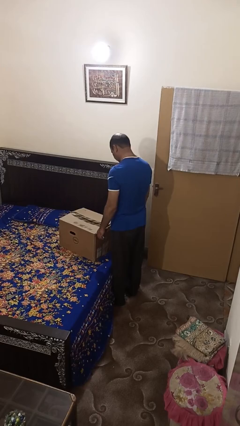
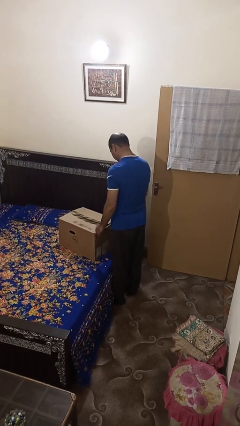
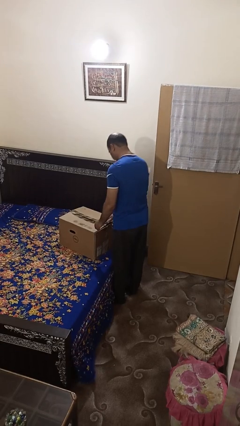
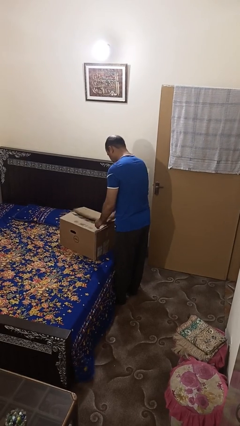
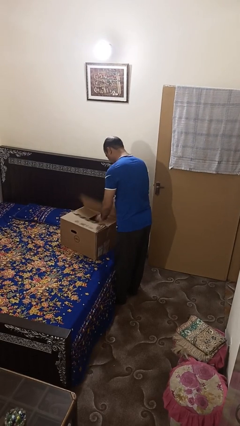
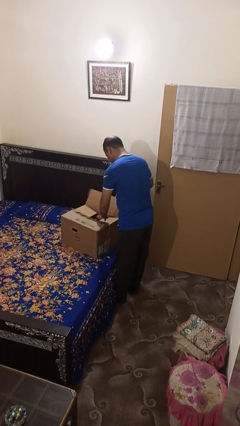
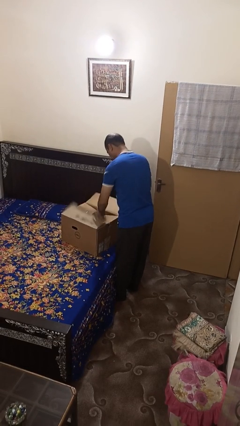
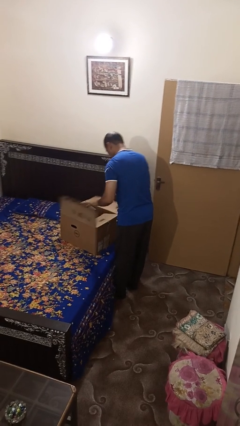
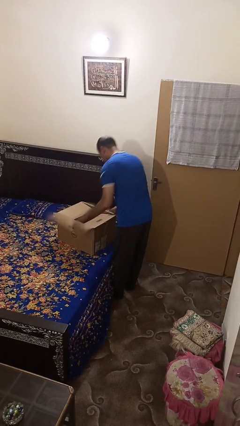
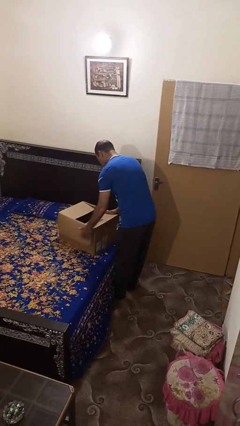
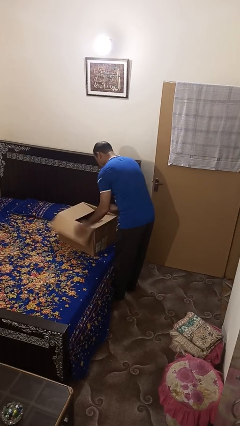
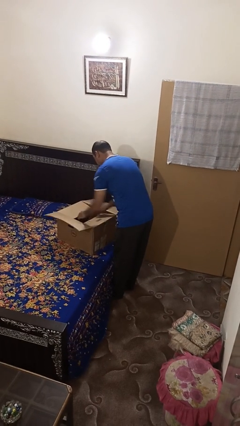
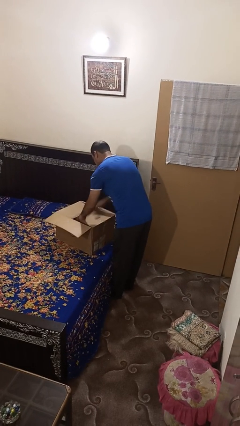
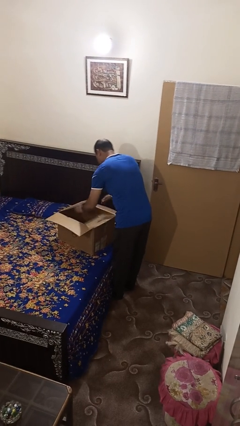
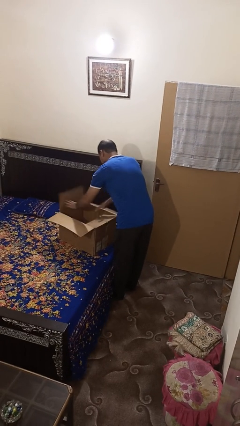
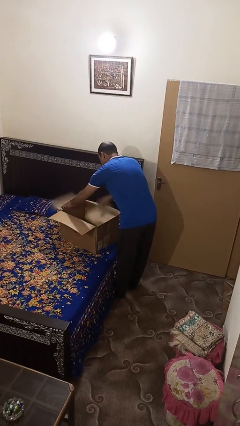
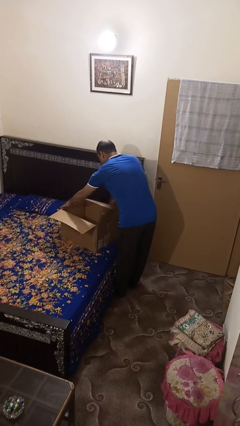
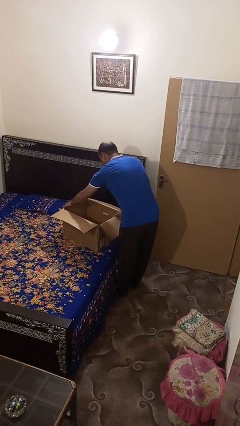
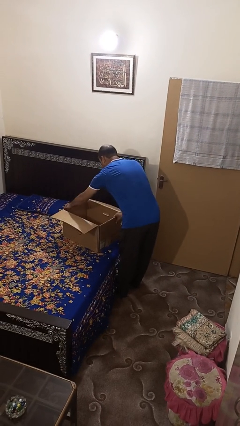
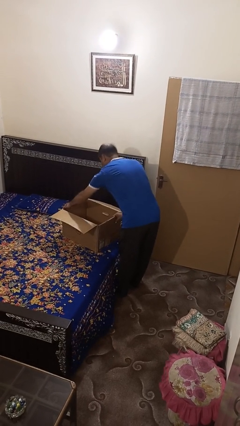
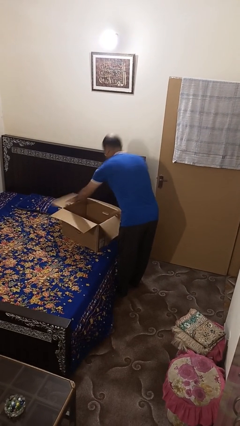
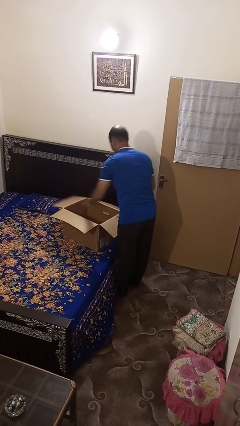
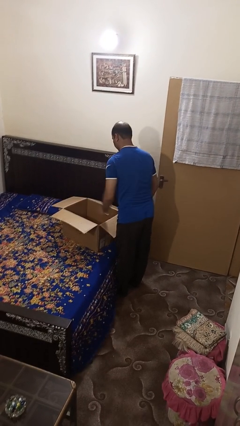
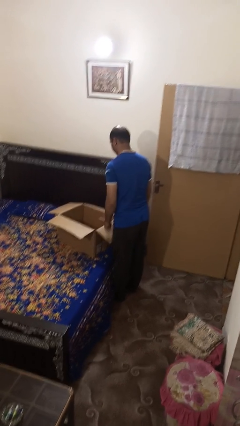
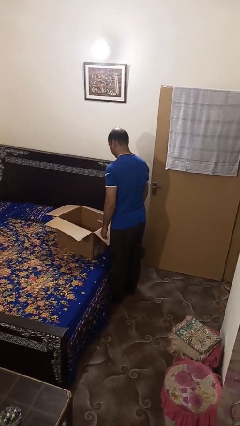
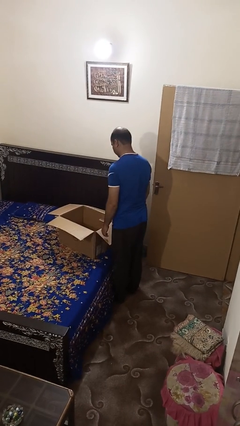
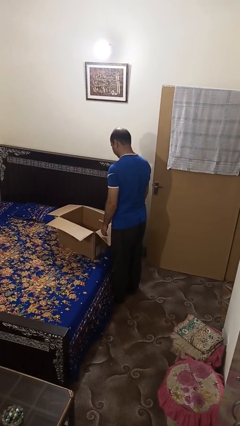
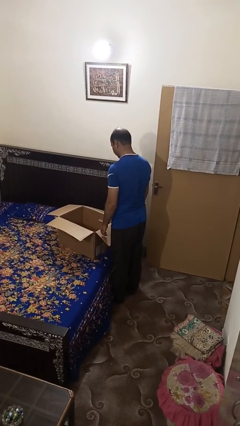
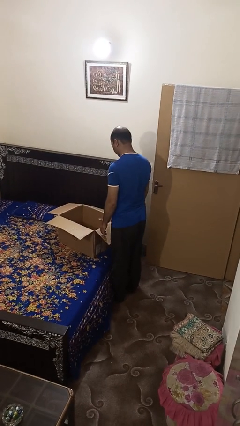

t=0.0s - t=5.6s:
person opens box

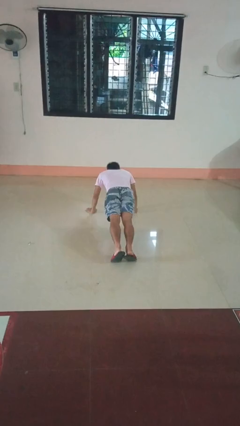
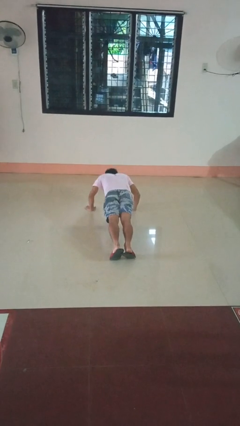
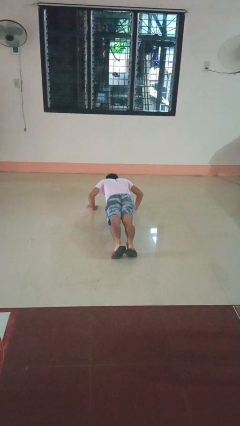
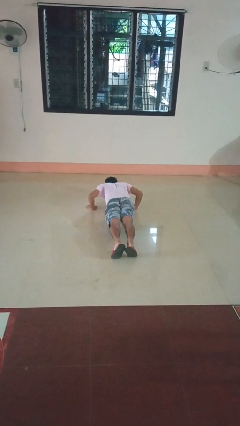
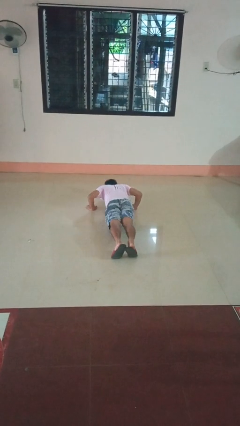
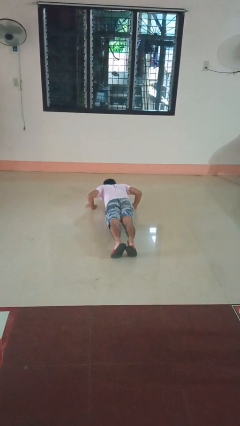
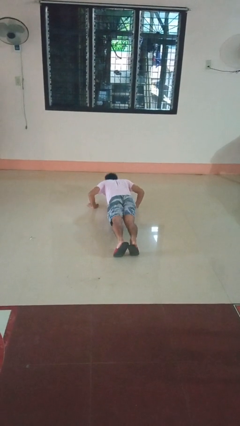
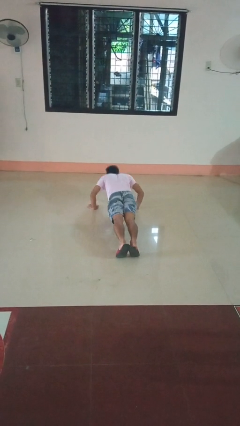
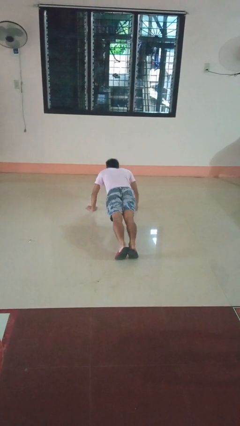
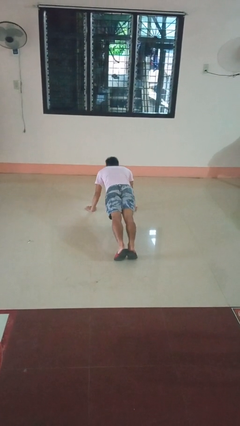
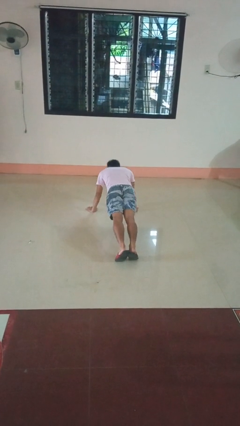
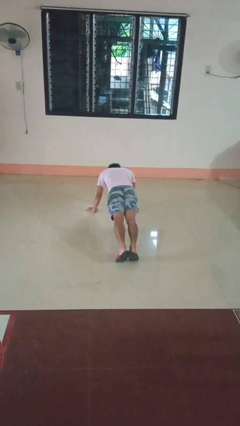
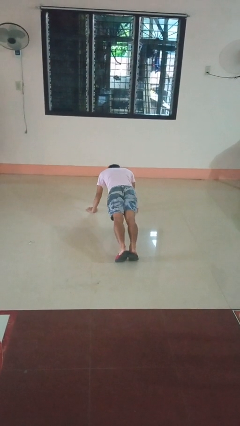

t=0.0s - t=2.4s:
person exercises with pushup

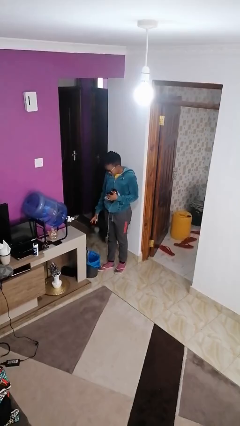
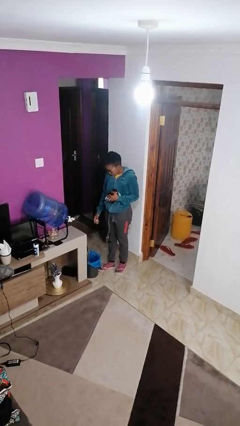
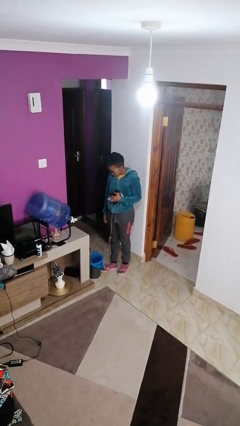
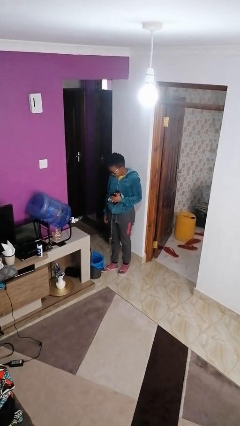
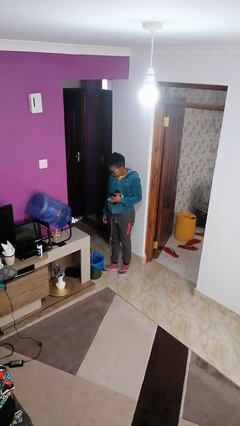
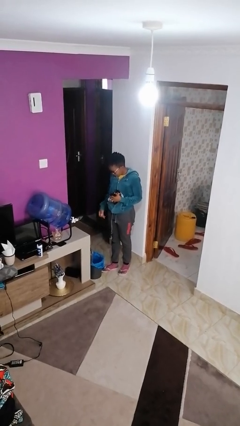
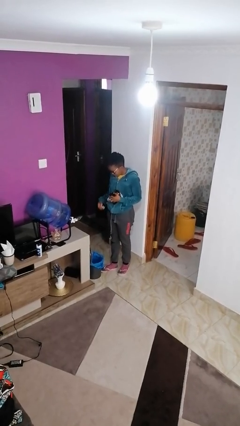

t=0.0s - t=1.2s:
person discards trash

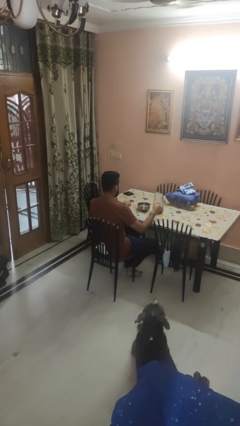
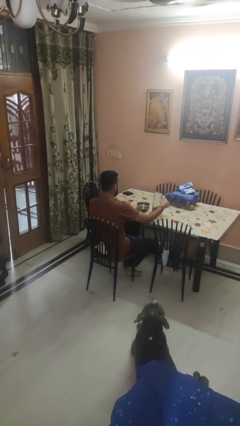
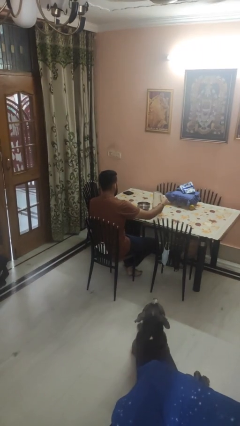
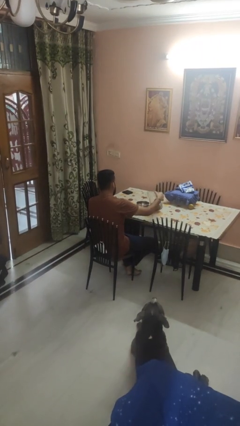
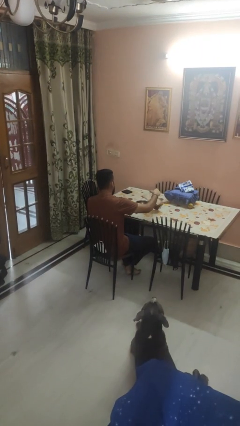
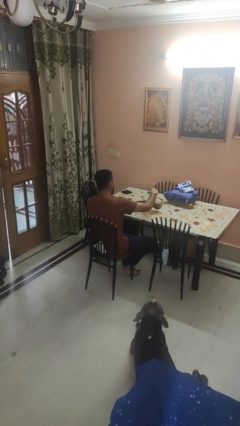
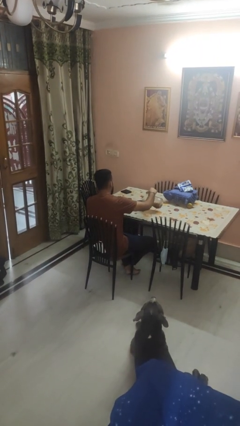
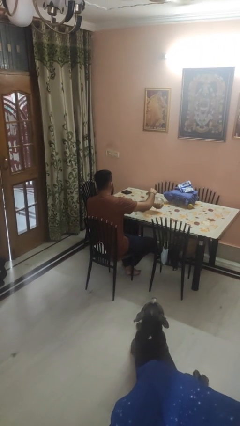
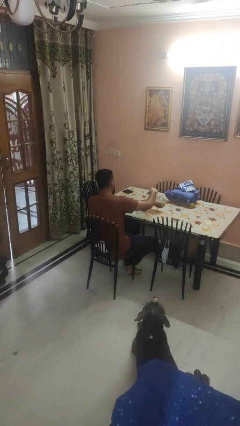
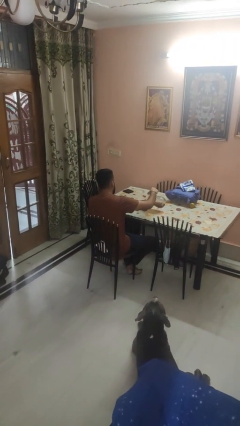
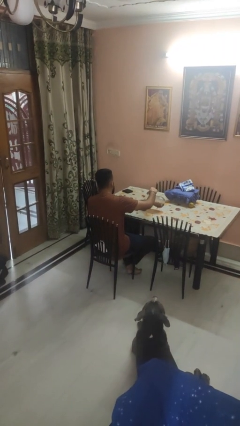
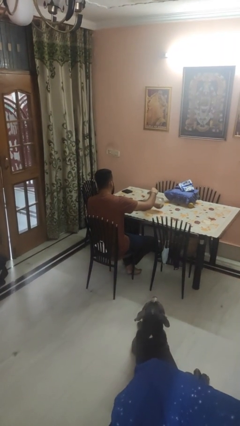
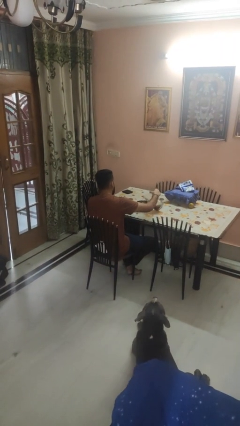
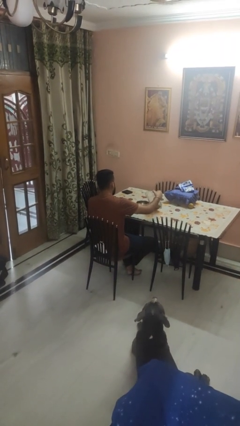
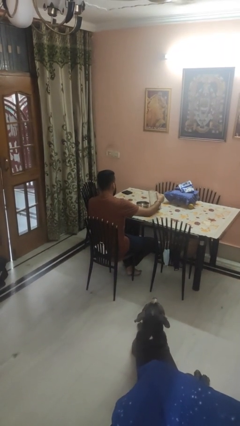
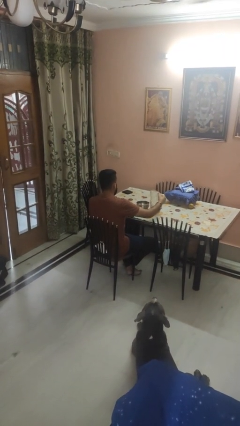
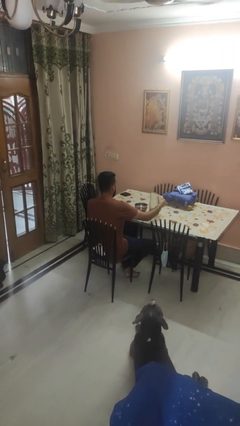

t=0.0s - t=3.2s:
person pours into bowl

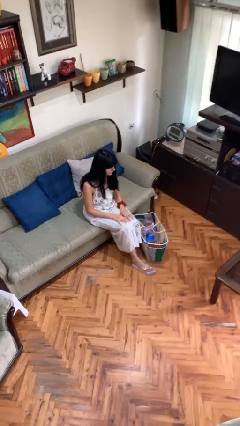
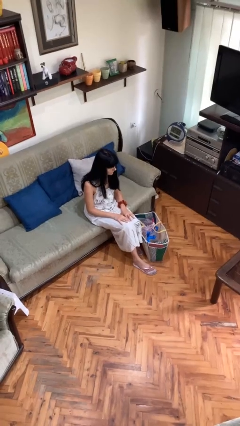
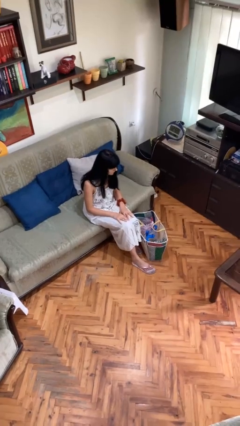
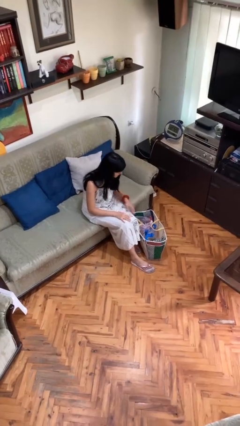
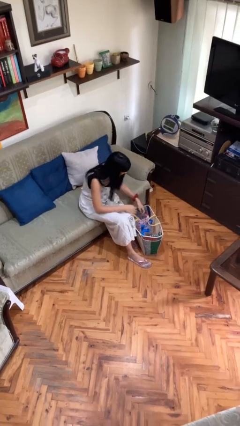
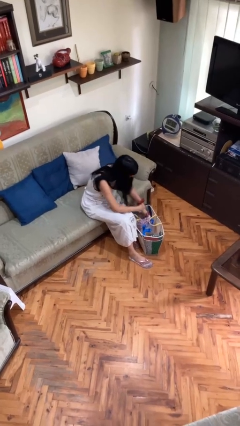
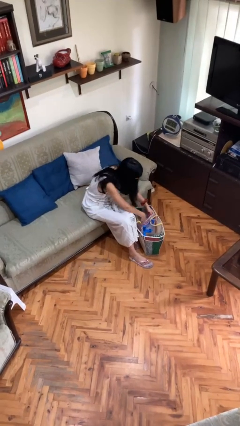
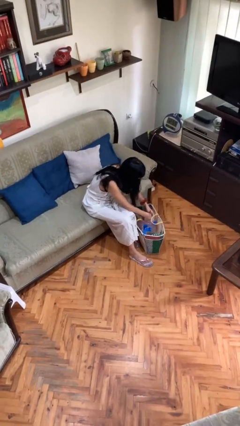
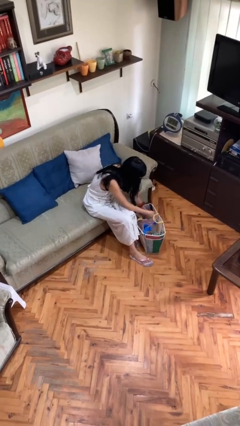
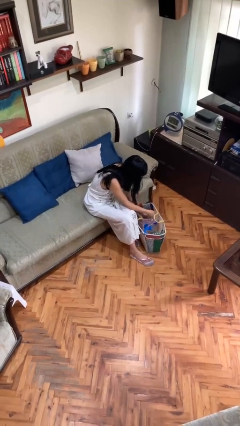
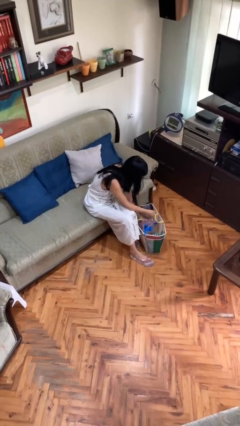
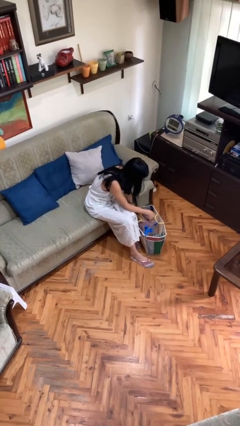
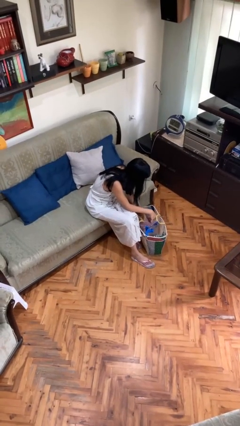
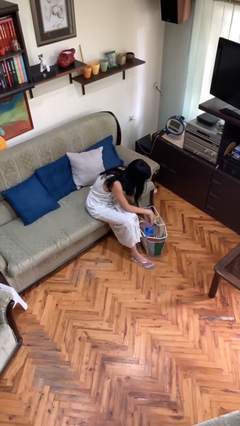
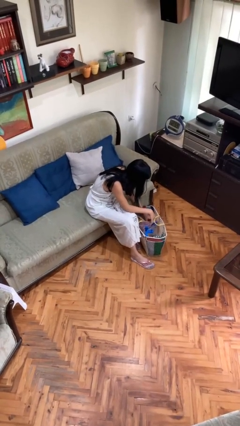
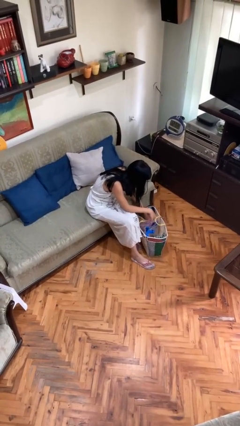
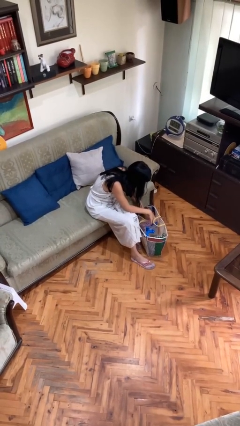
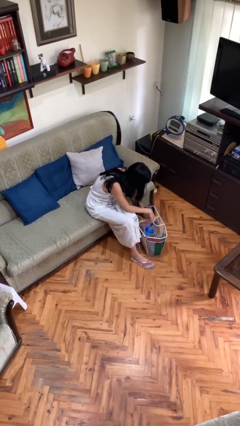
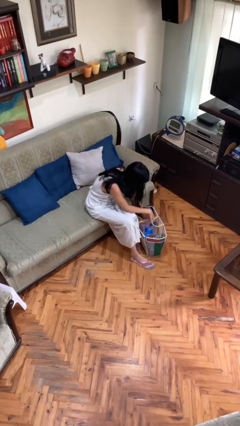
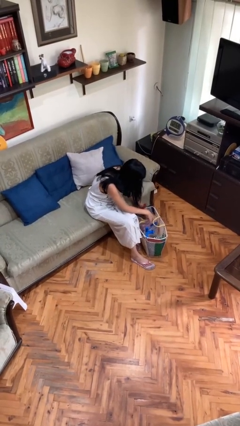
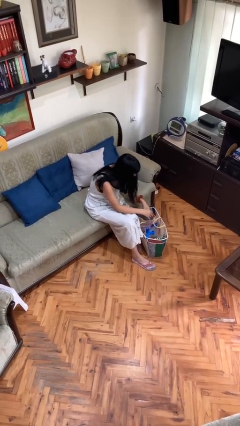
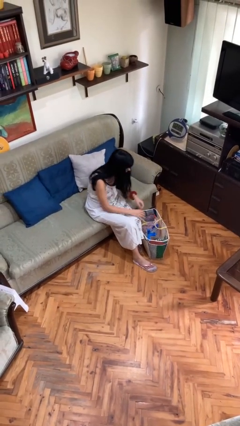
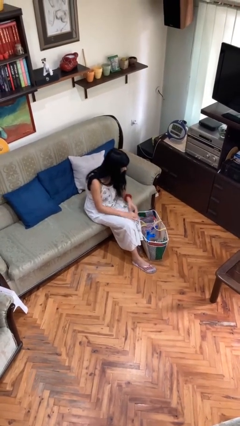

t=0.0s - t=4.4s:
person searches in bag

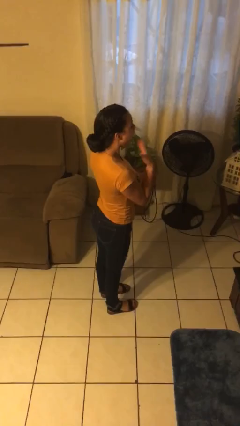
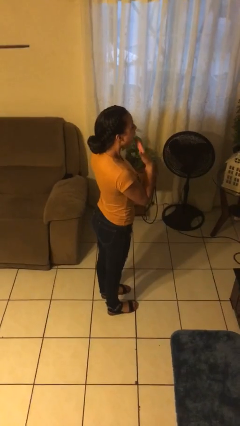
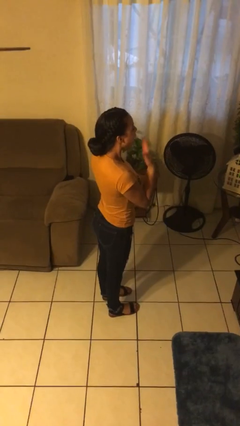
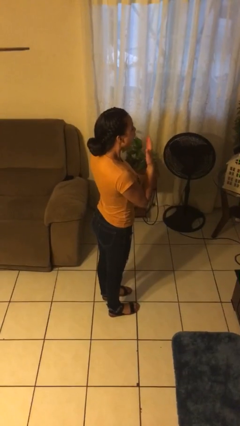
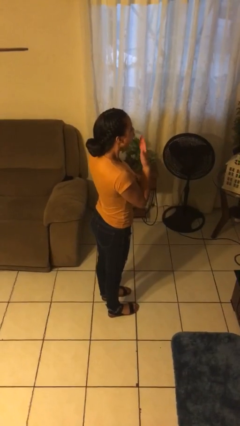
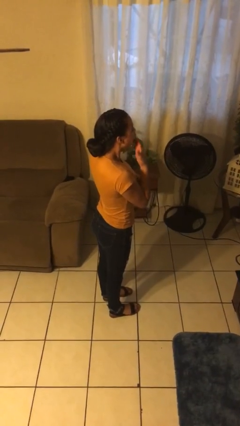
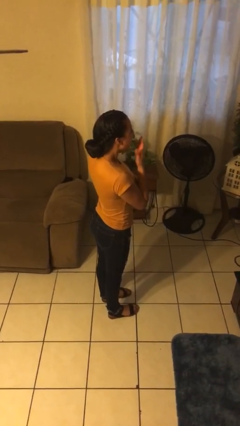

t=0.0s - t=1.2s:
person yawns
